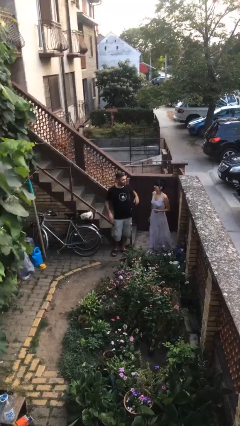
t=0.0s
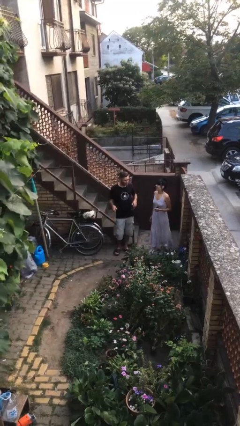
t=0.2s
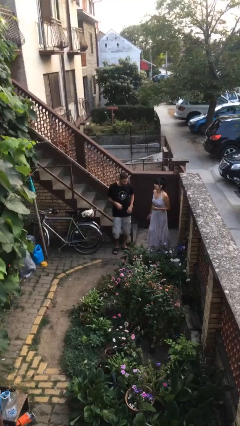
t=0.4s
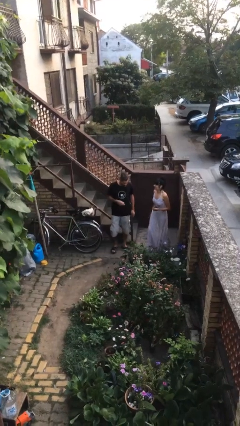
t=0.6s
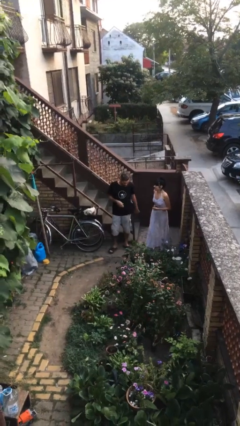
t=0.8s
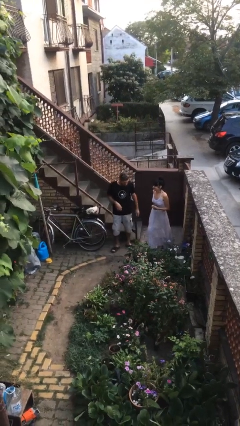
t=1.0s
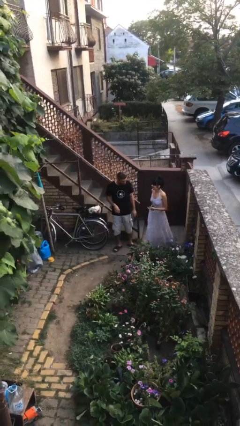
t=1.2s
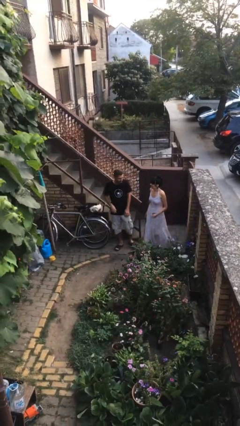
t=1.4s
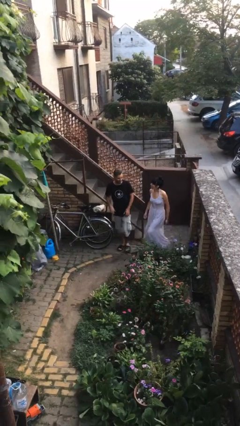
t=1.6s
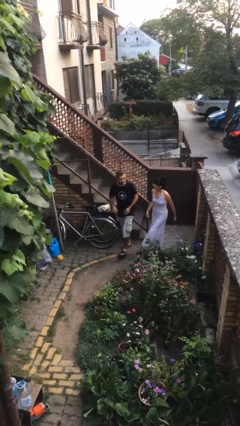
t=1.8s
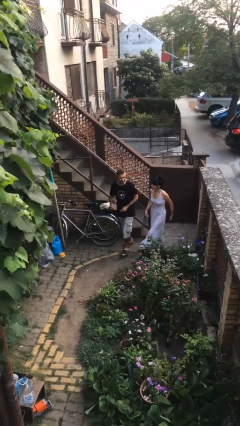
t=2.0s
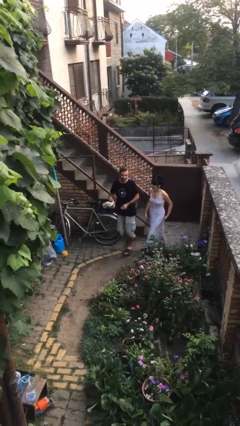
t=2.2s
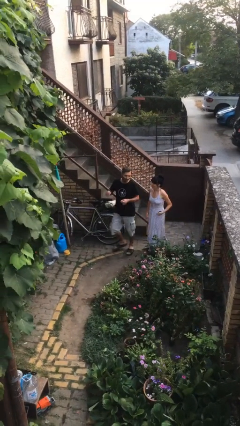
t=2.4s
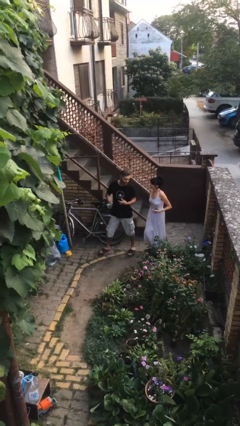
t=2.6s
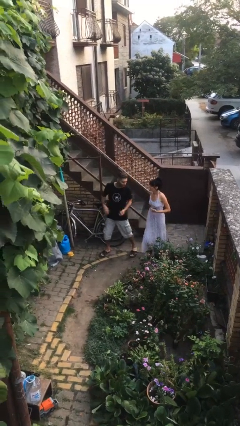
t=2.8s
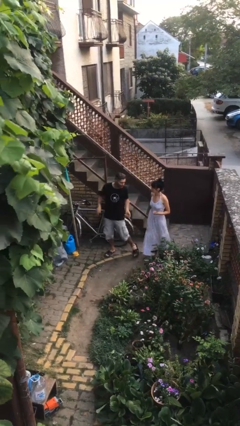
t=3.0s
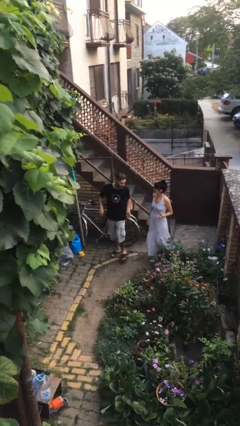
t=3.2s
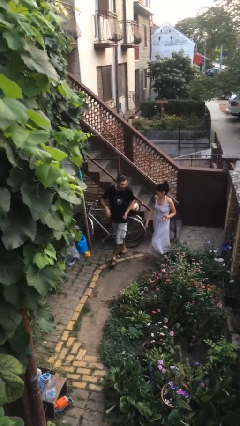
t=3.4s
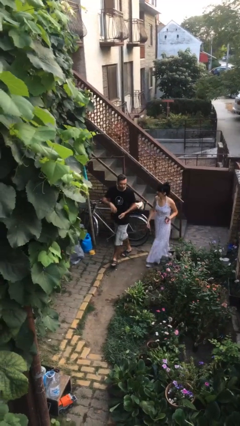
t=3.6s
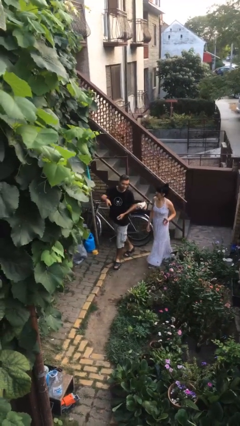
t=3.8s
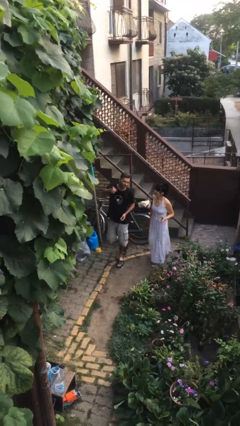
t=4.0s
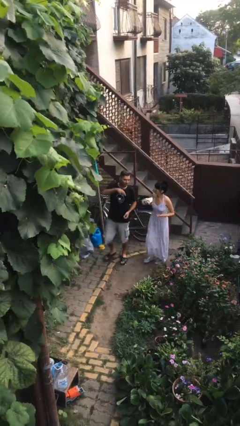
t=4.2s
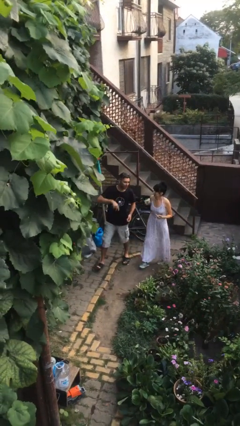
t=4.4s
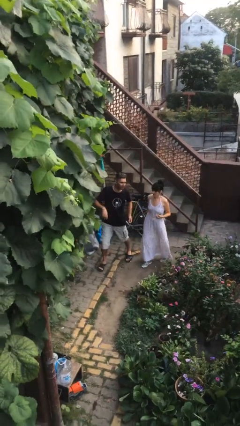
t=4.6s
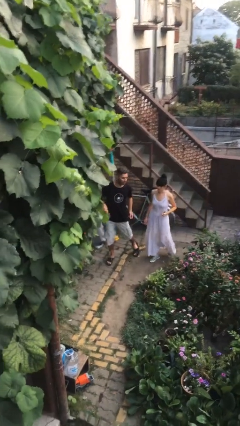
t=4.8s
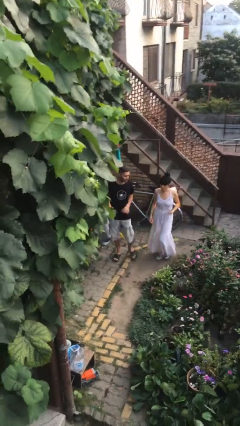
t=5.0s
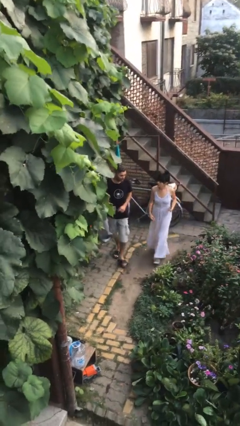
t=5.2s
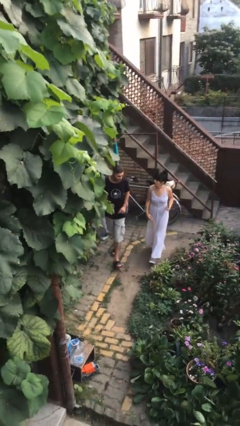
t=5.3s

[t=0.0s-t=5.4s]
person talks to person

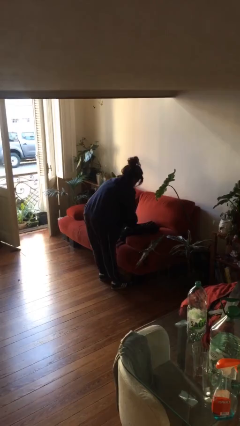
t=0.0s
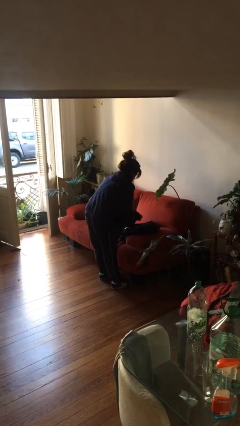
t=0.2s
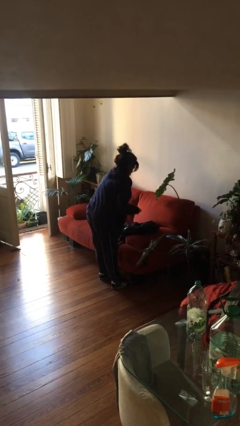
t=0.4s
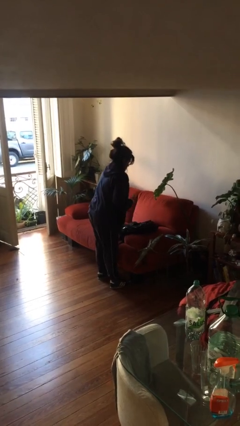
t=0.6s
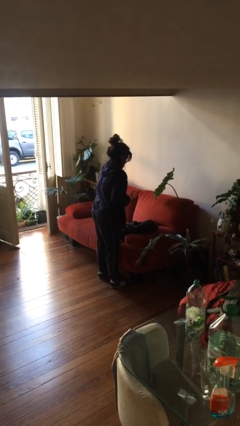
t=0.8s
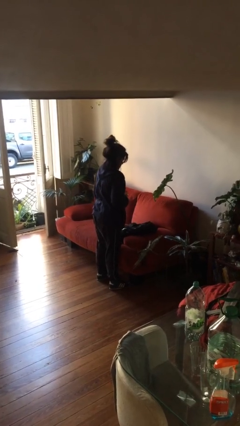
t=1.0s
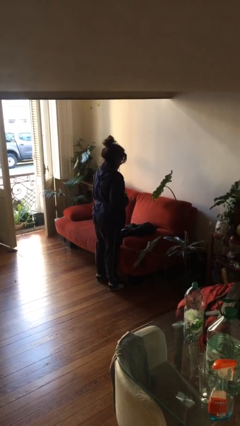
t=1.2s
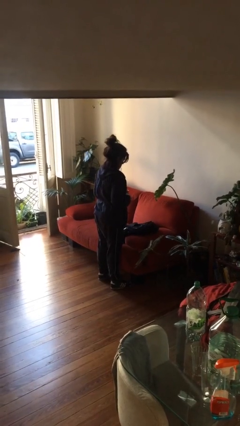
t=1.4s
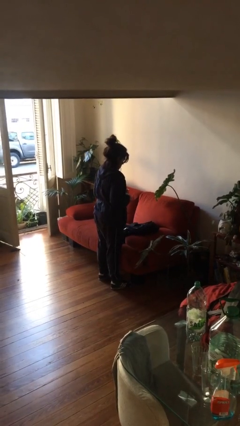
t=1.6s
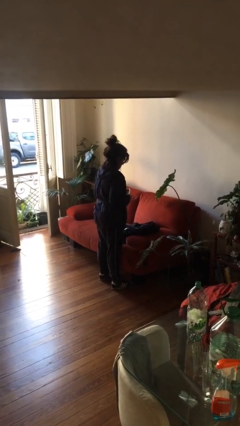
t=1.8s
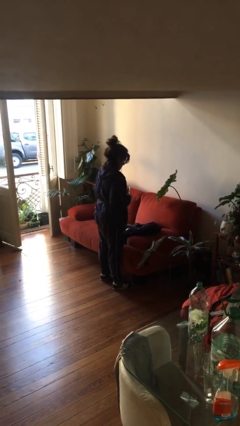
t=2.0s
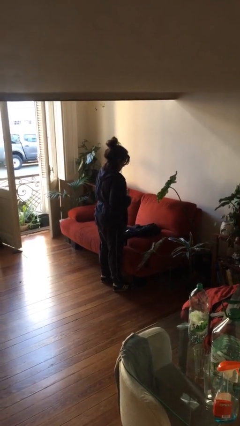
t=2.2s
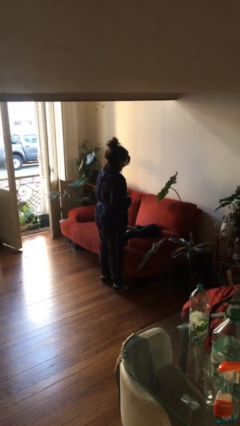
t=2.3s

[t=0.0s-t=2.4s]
person takes object from backpack

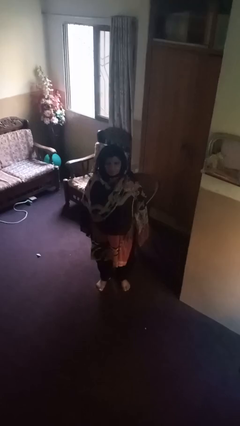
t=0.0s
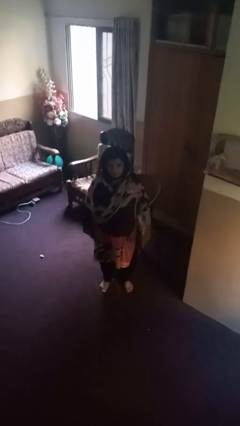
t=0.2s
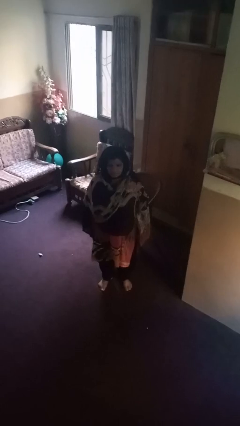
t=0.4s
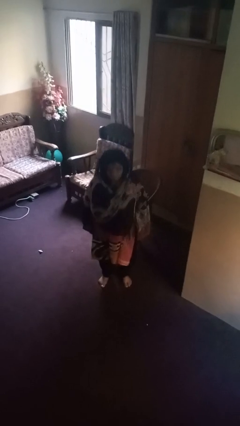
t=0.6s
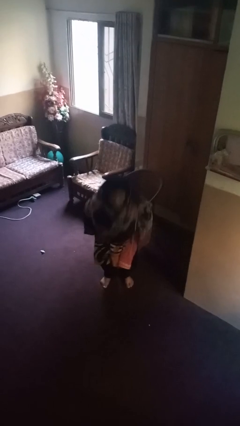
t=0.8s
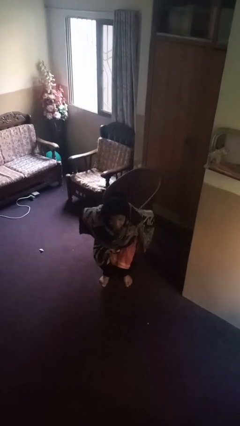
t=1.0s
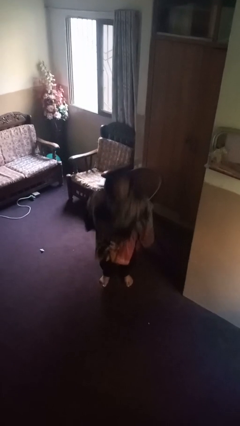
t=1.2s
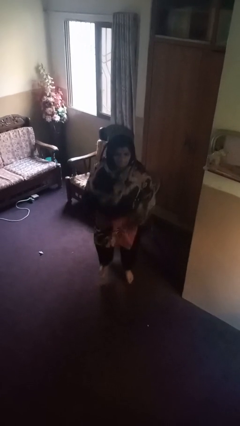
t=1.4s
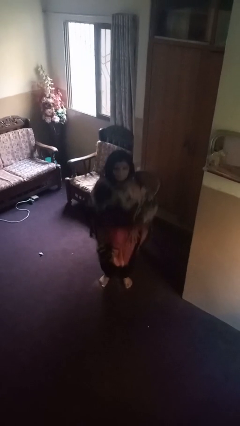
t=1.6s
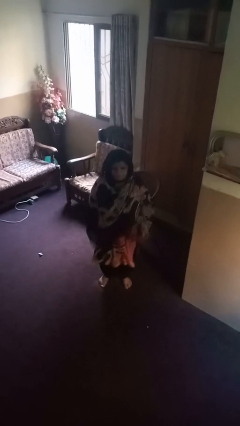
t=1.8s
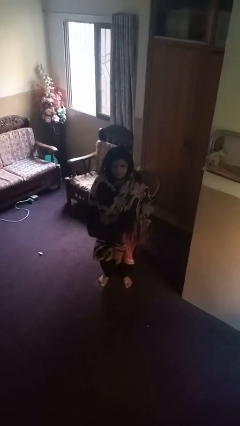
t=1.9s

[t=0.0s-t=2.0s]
person jumps

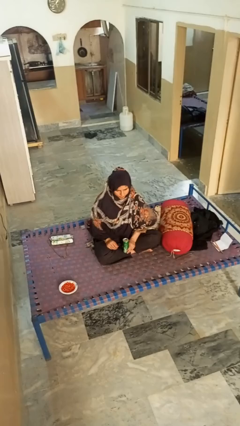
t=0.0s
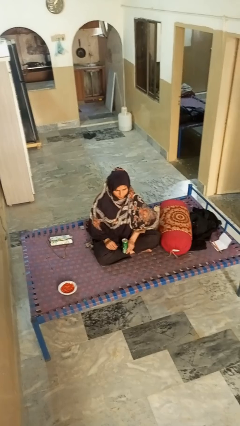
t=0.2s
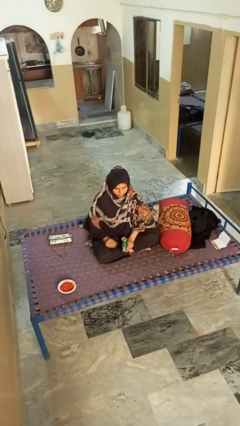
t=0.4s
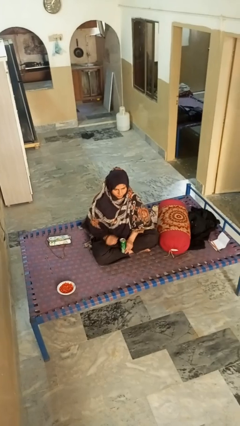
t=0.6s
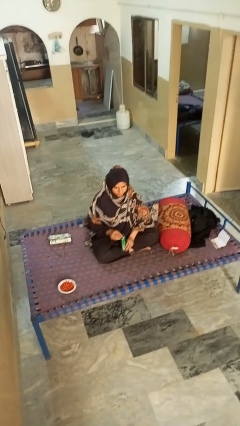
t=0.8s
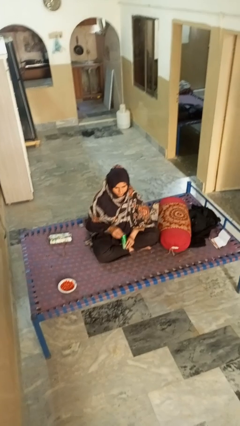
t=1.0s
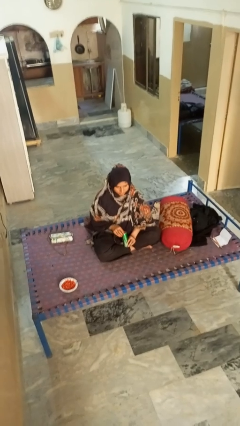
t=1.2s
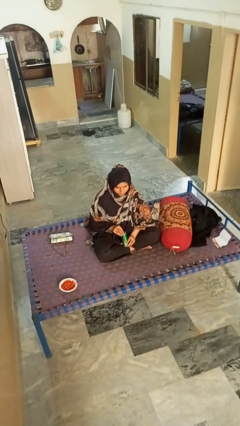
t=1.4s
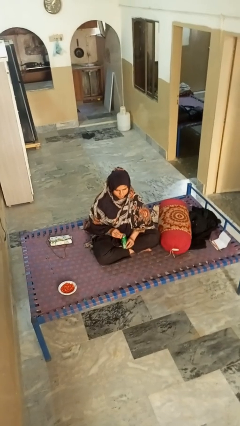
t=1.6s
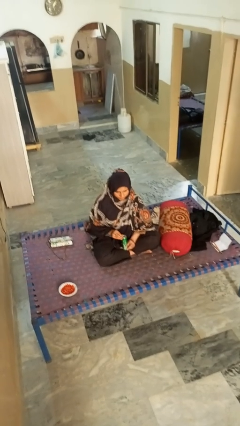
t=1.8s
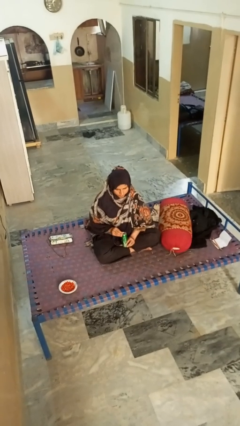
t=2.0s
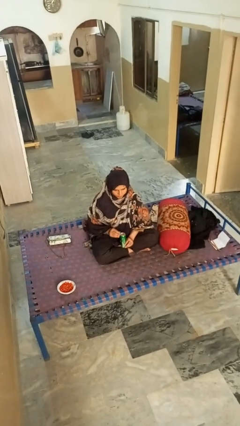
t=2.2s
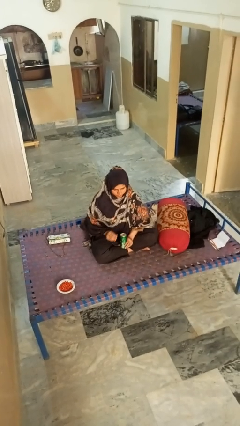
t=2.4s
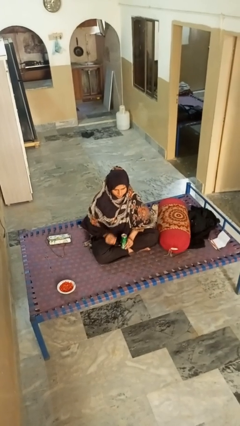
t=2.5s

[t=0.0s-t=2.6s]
person opens can with can opener

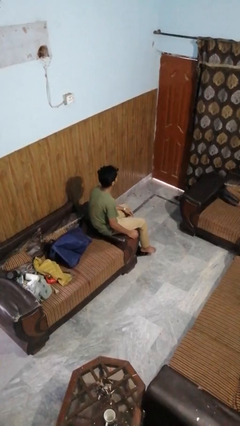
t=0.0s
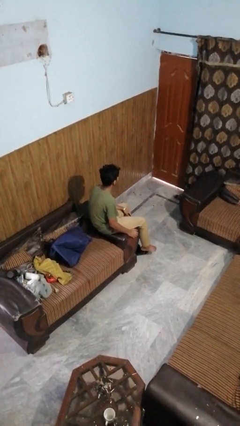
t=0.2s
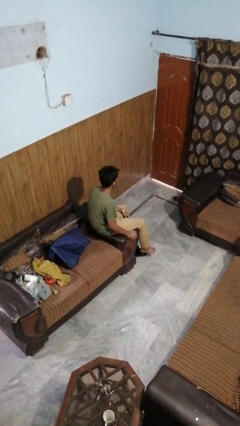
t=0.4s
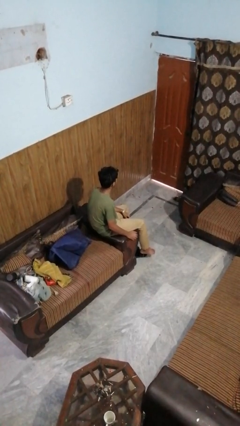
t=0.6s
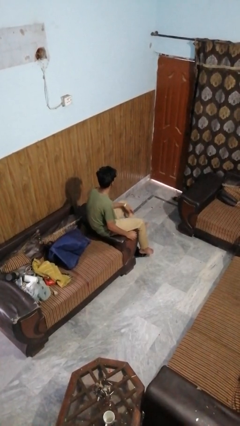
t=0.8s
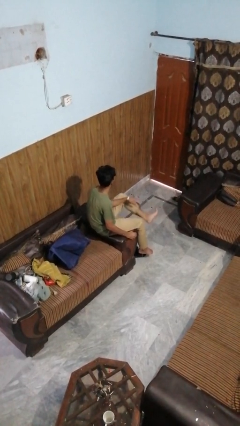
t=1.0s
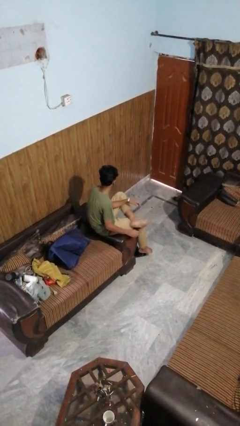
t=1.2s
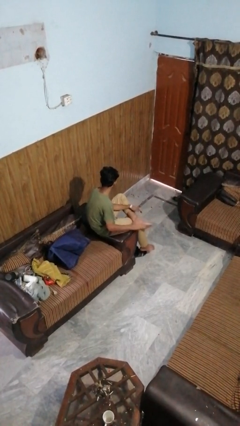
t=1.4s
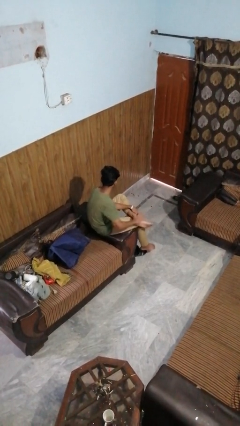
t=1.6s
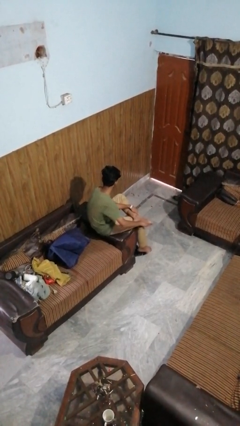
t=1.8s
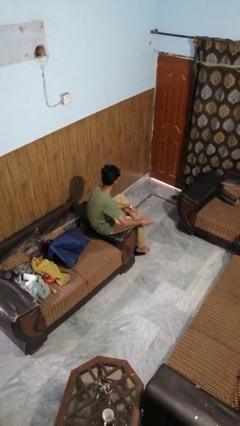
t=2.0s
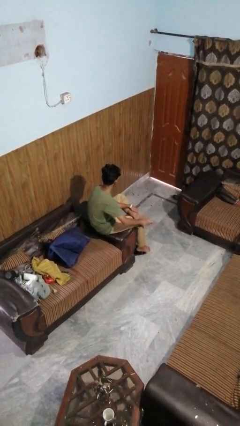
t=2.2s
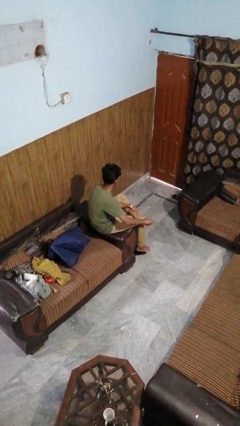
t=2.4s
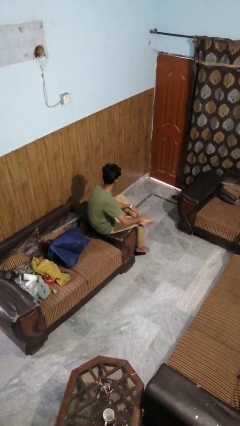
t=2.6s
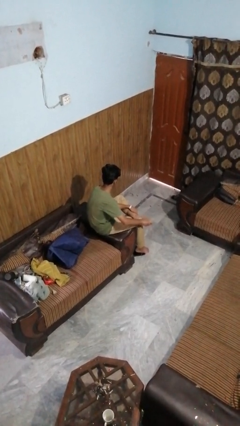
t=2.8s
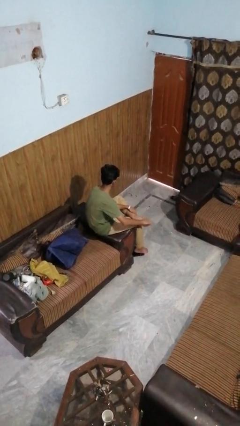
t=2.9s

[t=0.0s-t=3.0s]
person rubs foot

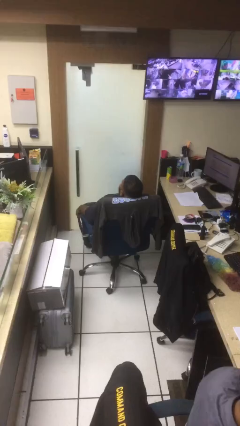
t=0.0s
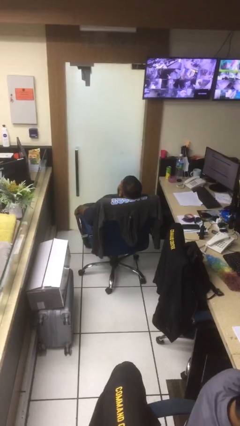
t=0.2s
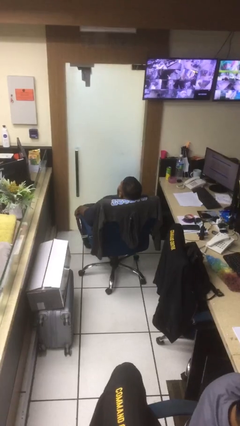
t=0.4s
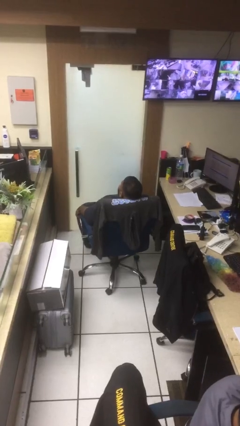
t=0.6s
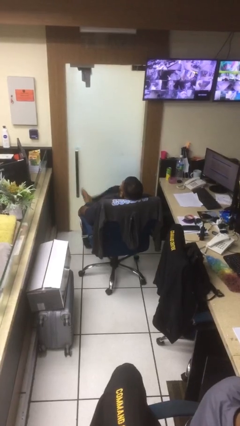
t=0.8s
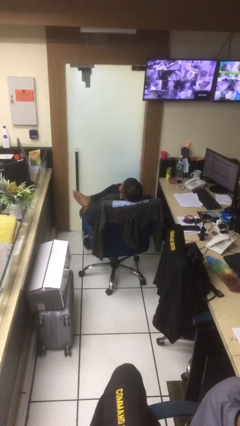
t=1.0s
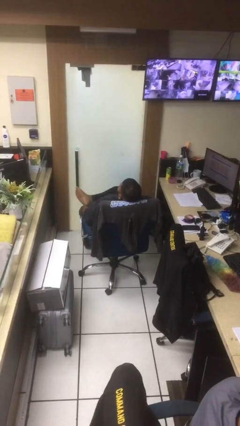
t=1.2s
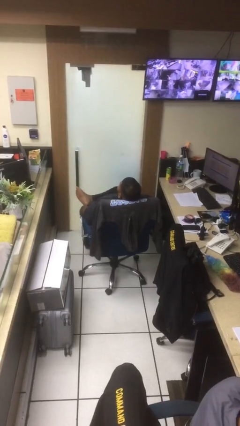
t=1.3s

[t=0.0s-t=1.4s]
person crosses legs

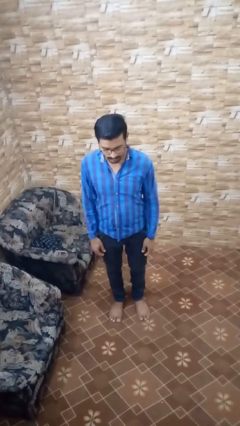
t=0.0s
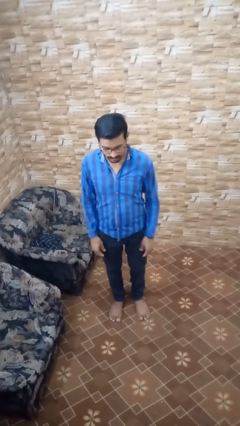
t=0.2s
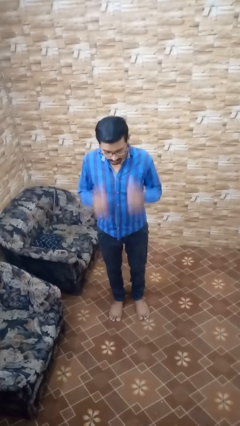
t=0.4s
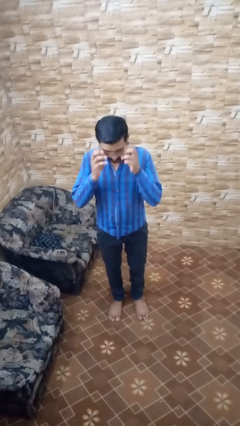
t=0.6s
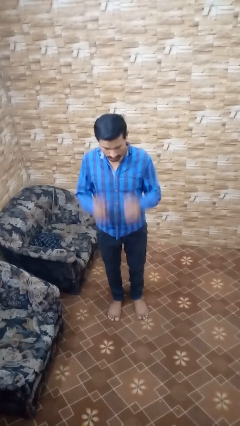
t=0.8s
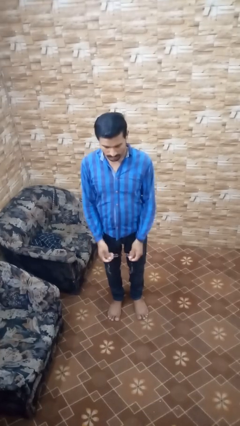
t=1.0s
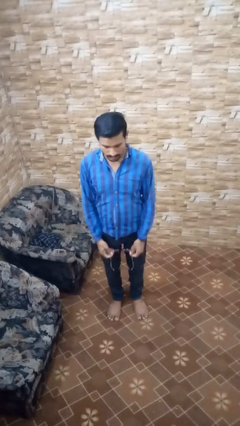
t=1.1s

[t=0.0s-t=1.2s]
person takes off glasses
